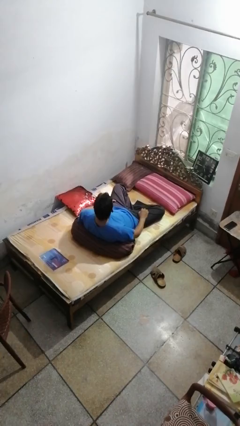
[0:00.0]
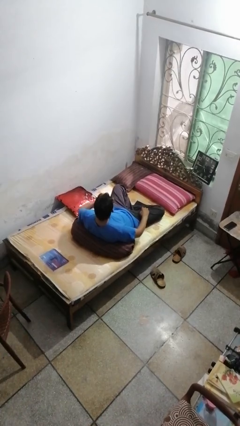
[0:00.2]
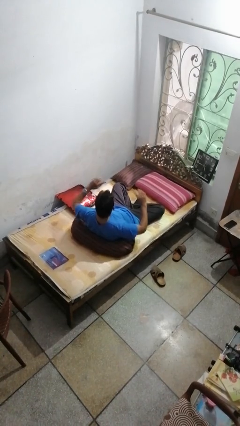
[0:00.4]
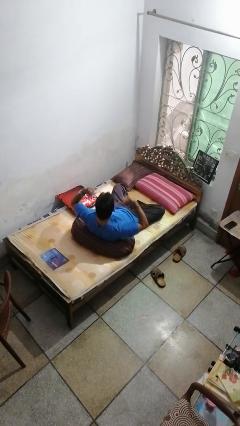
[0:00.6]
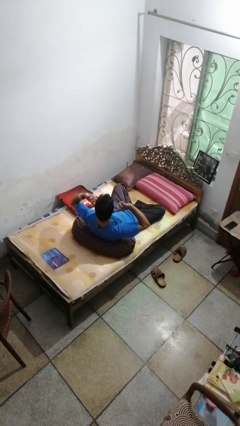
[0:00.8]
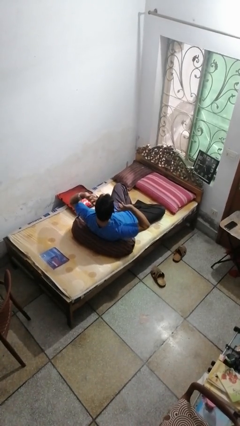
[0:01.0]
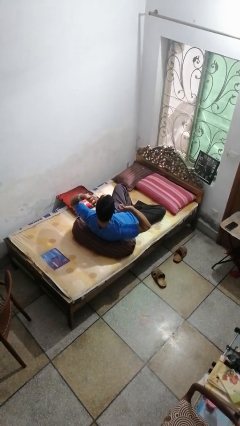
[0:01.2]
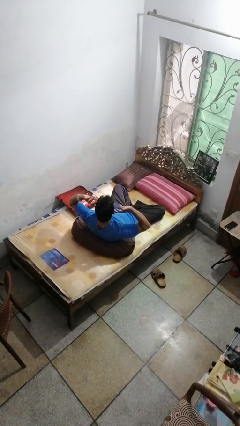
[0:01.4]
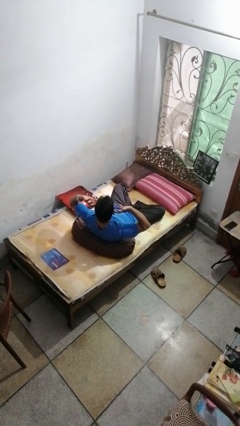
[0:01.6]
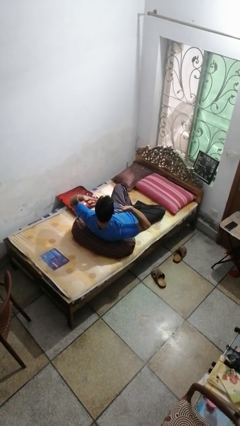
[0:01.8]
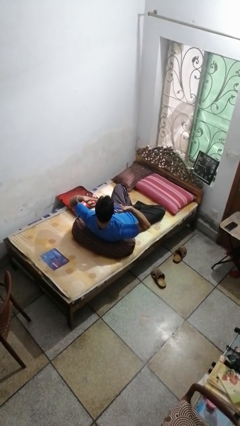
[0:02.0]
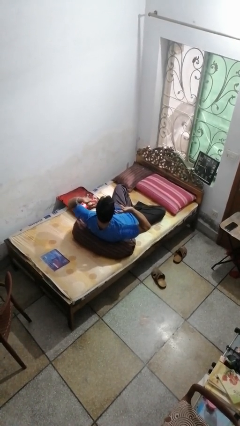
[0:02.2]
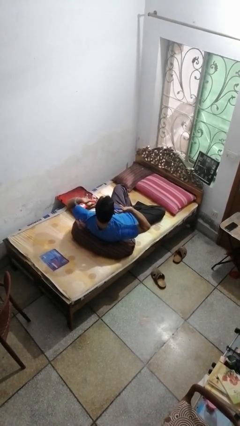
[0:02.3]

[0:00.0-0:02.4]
person puts fingers in ear

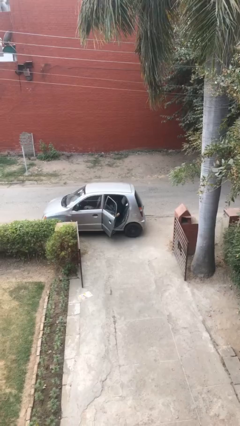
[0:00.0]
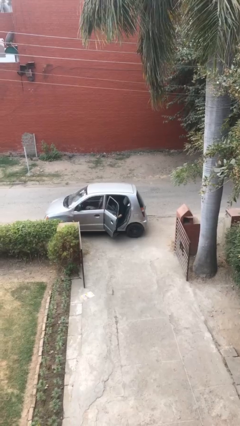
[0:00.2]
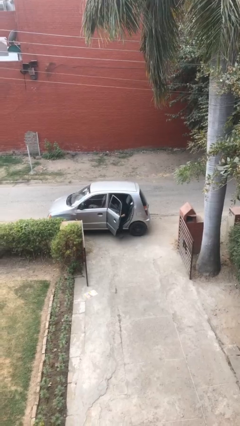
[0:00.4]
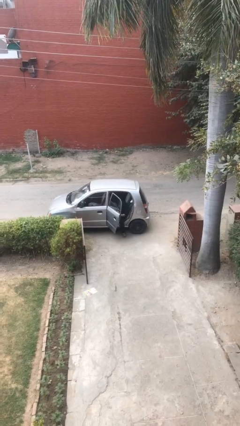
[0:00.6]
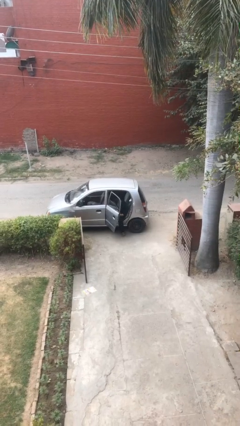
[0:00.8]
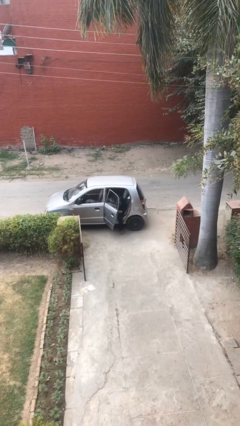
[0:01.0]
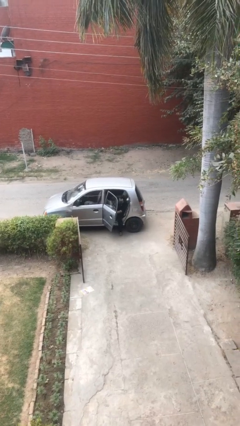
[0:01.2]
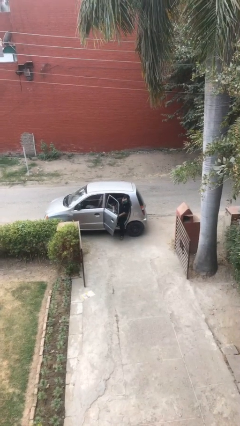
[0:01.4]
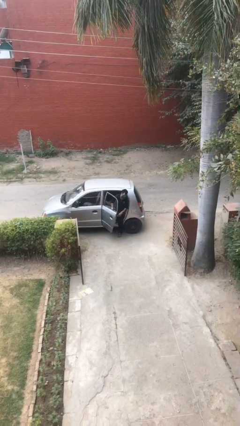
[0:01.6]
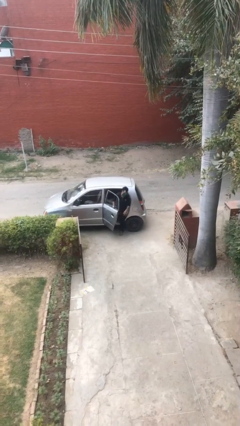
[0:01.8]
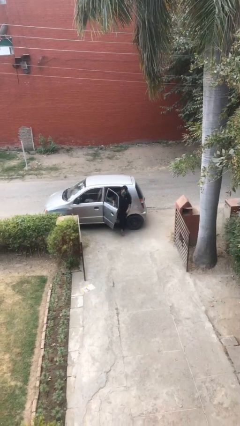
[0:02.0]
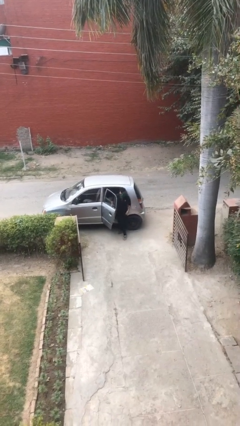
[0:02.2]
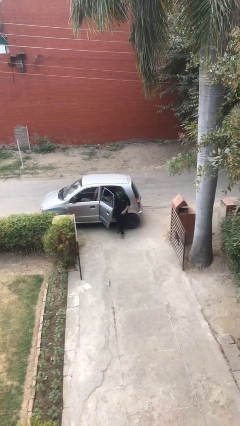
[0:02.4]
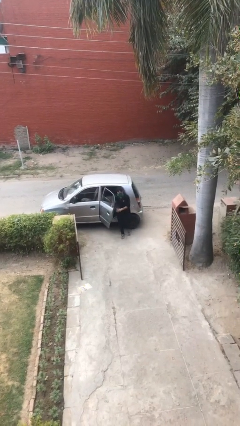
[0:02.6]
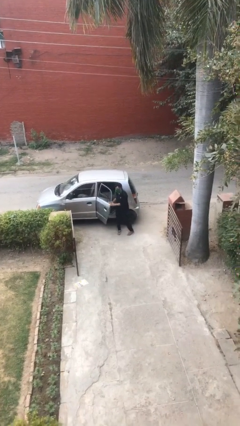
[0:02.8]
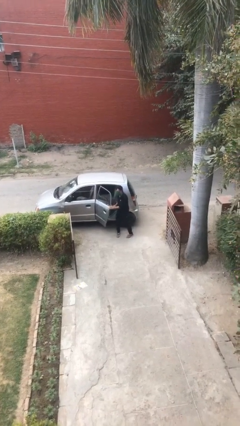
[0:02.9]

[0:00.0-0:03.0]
person exits car

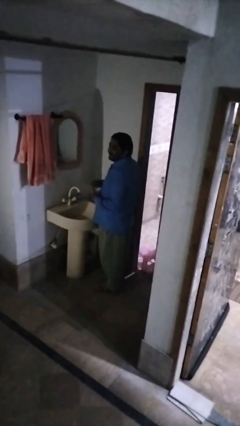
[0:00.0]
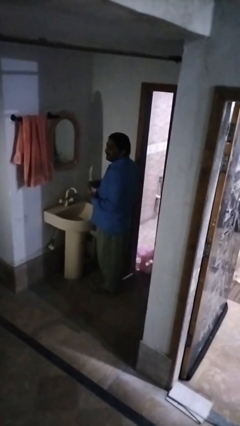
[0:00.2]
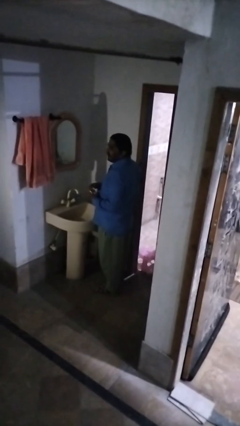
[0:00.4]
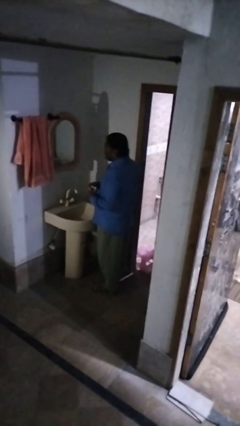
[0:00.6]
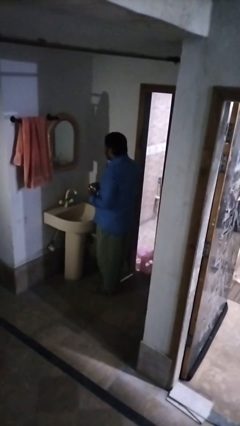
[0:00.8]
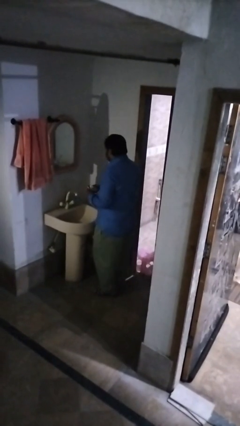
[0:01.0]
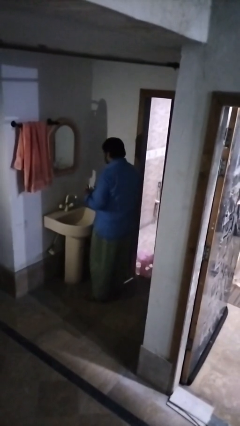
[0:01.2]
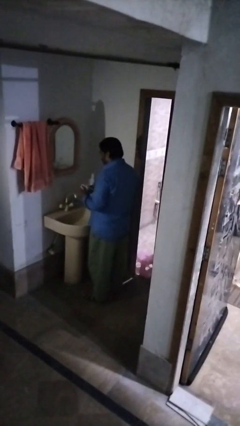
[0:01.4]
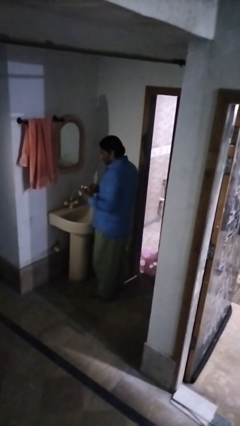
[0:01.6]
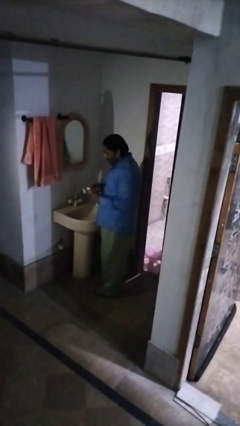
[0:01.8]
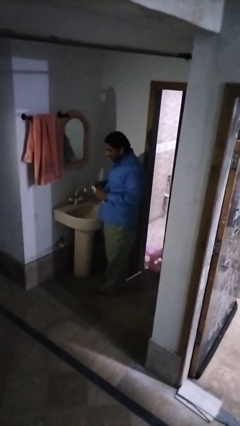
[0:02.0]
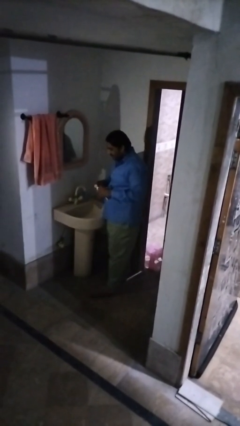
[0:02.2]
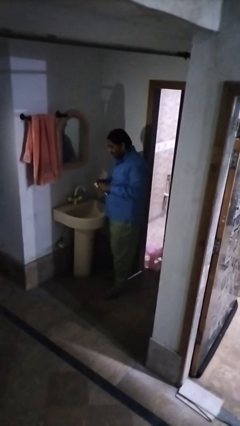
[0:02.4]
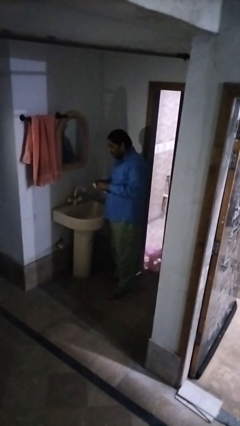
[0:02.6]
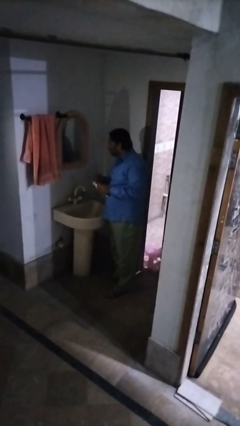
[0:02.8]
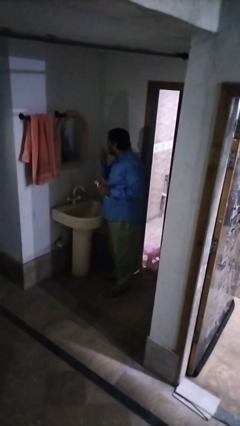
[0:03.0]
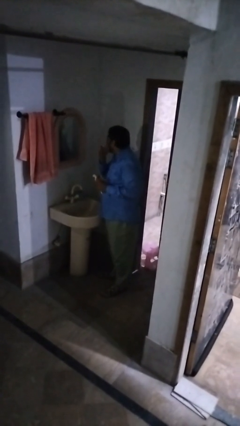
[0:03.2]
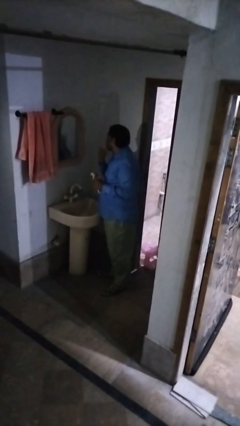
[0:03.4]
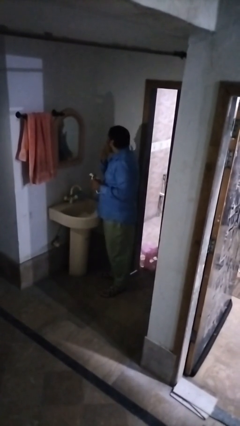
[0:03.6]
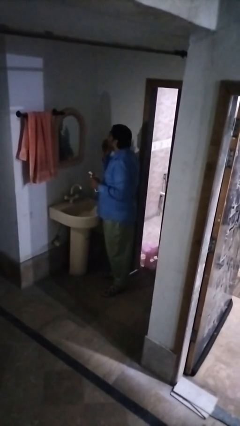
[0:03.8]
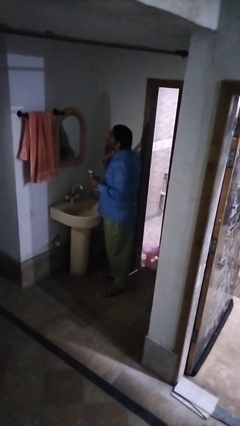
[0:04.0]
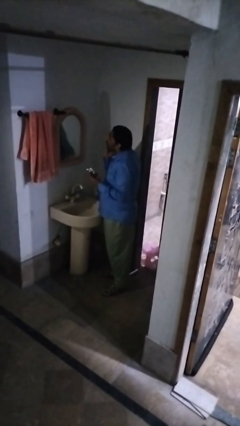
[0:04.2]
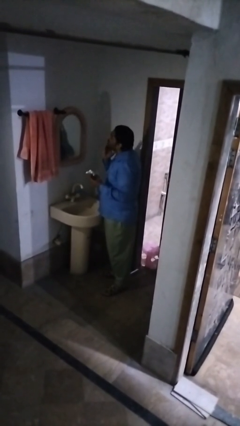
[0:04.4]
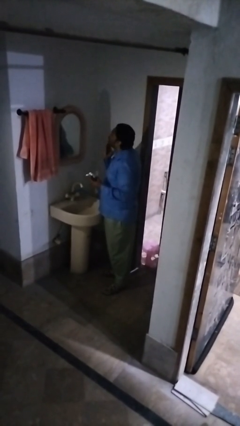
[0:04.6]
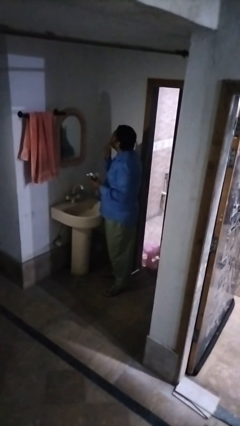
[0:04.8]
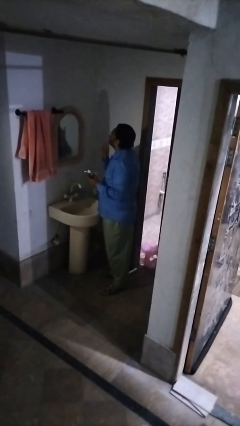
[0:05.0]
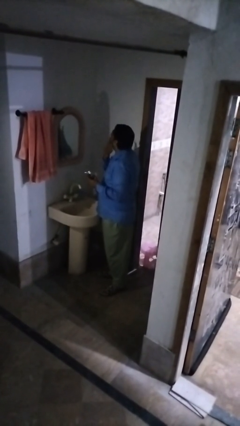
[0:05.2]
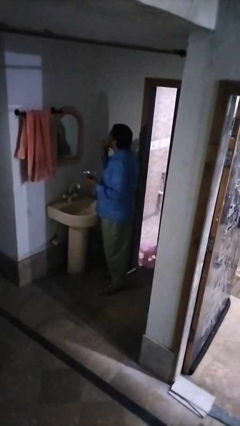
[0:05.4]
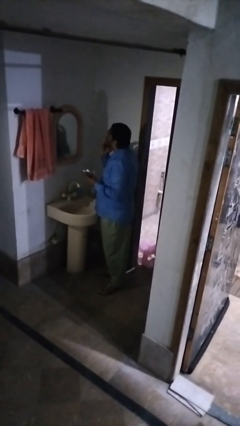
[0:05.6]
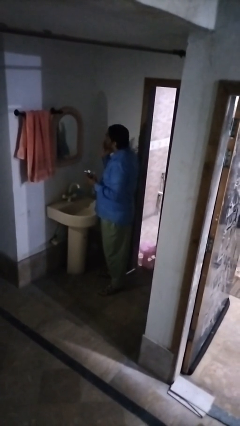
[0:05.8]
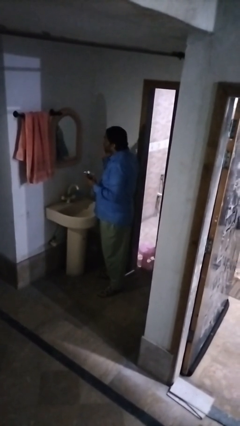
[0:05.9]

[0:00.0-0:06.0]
person applies shaving cream

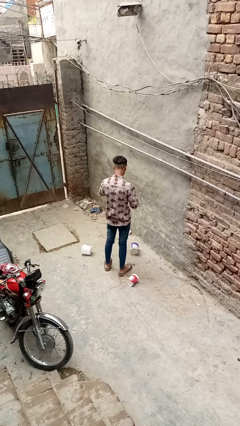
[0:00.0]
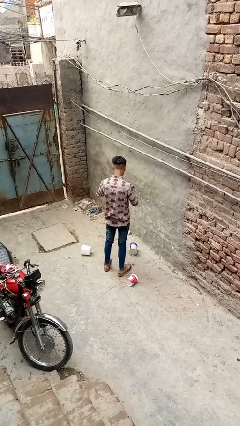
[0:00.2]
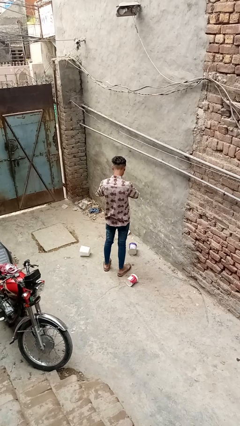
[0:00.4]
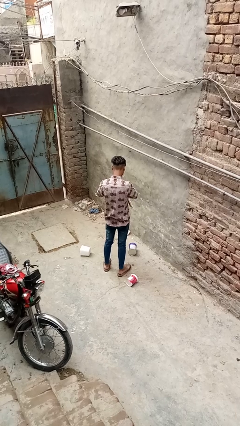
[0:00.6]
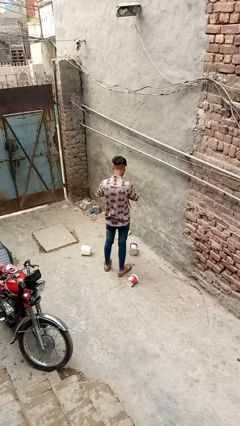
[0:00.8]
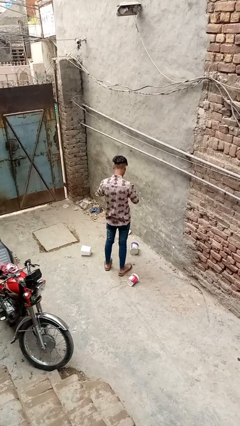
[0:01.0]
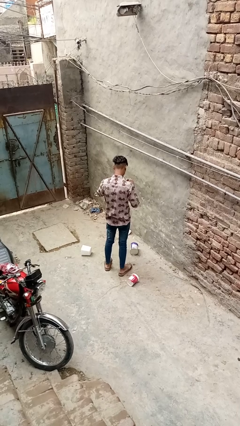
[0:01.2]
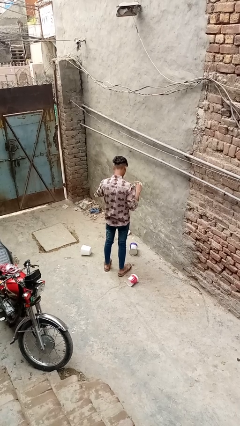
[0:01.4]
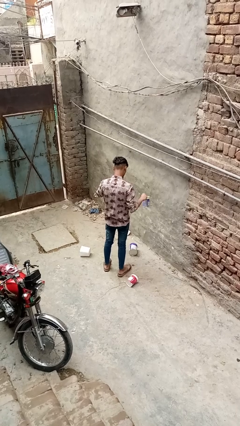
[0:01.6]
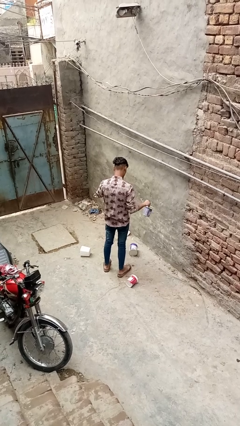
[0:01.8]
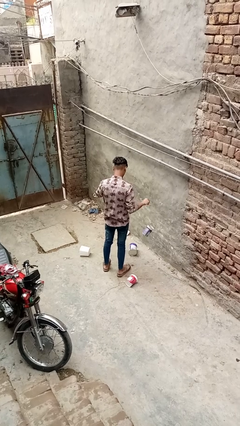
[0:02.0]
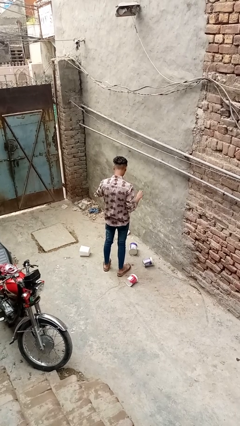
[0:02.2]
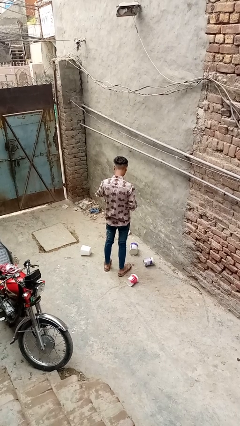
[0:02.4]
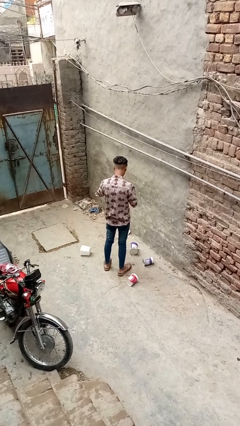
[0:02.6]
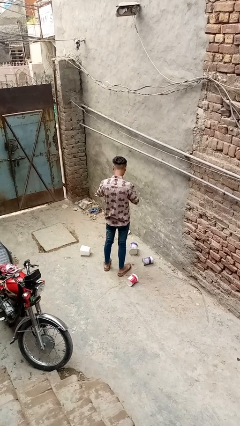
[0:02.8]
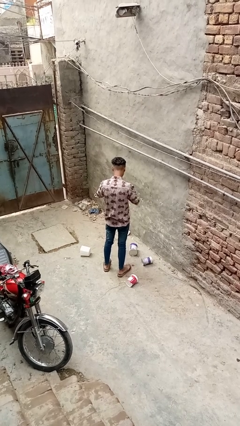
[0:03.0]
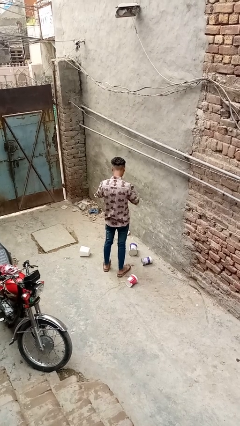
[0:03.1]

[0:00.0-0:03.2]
person discards trash

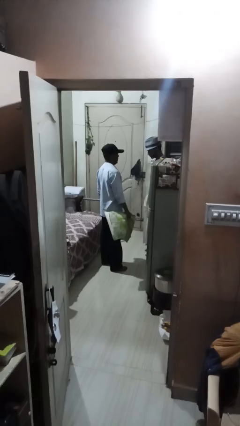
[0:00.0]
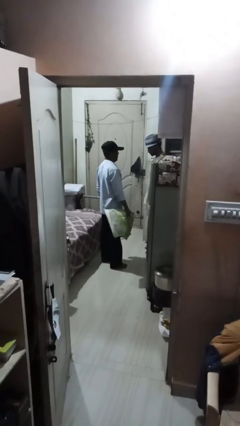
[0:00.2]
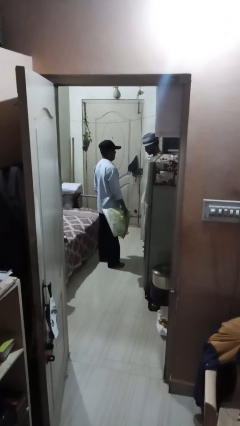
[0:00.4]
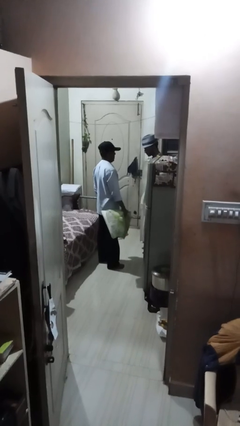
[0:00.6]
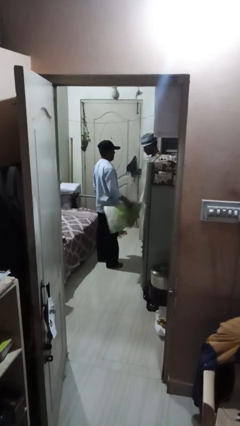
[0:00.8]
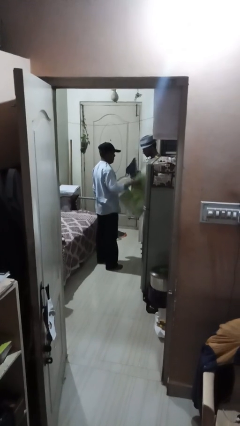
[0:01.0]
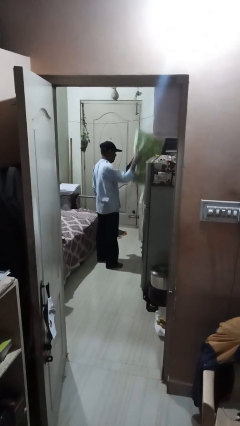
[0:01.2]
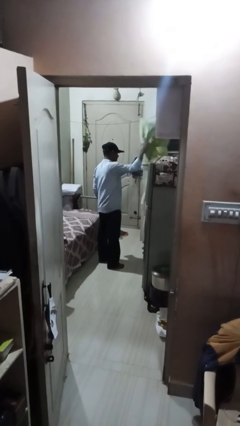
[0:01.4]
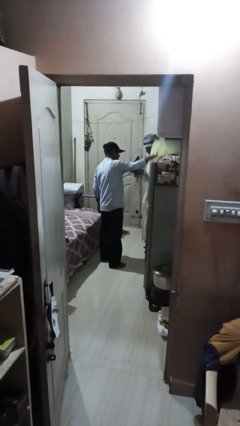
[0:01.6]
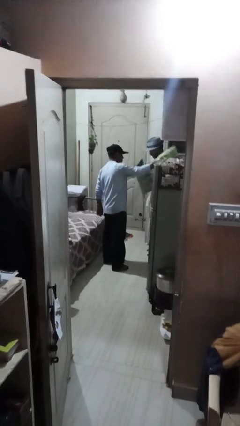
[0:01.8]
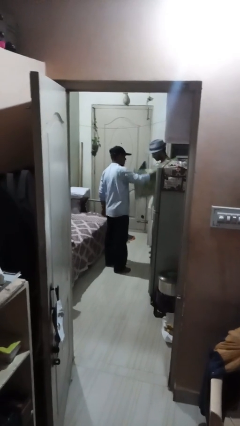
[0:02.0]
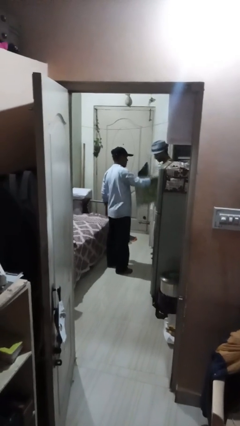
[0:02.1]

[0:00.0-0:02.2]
person hits person with pillow

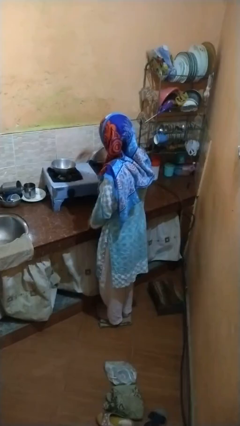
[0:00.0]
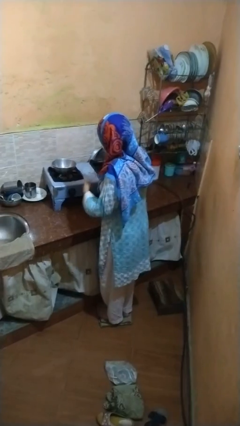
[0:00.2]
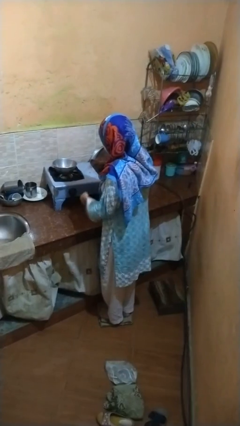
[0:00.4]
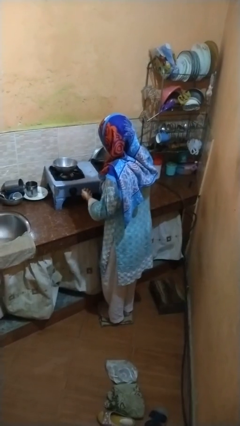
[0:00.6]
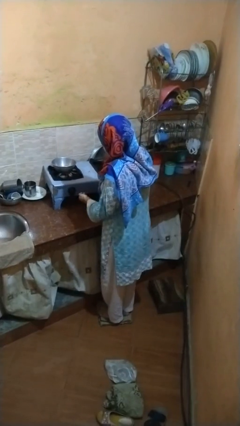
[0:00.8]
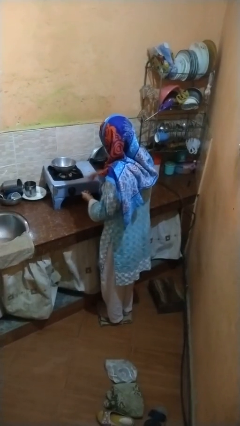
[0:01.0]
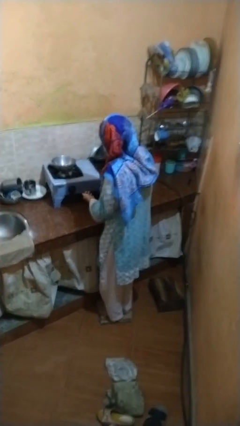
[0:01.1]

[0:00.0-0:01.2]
person burns hand
